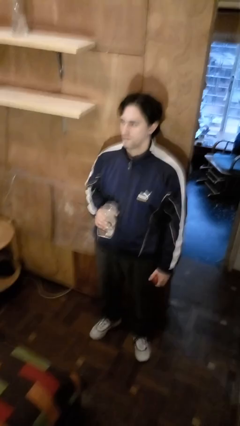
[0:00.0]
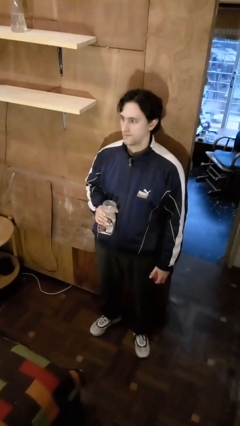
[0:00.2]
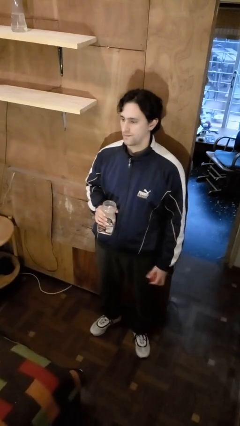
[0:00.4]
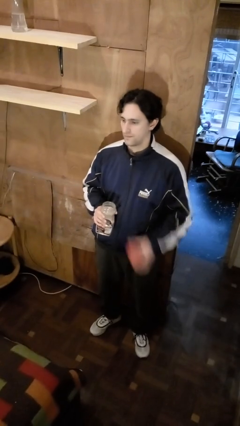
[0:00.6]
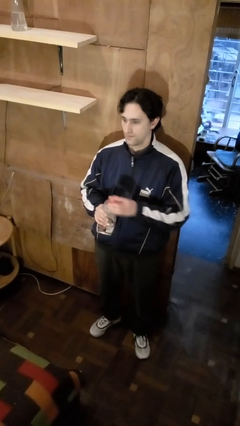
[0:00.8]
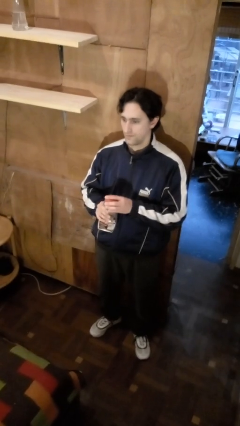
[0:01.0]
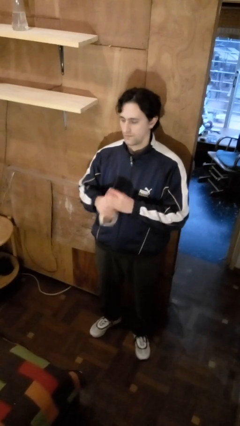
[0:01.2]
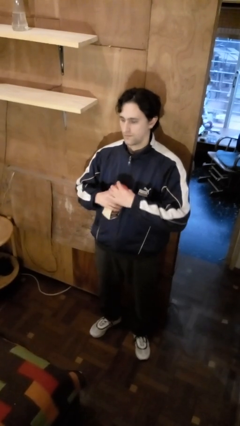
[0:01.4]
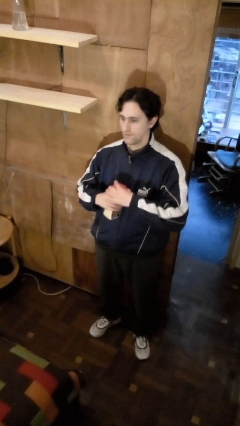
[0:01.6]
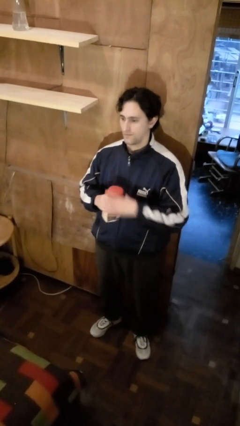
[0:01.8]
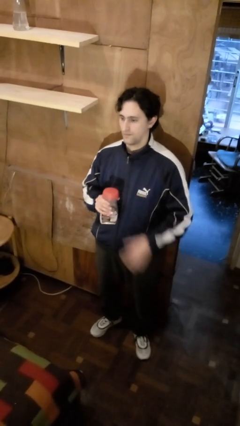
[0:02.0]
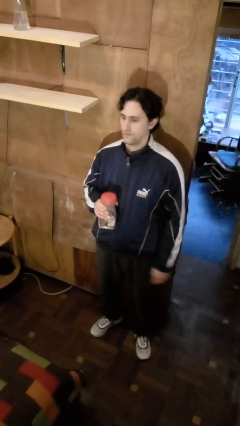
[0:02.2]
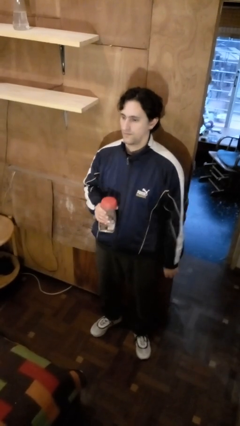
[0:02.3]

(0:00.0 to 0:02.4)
person closes jar

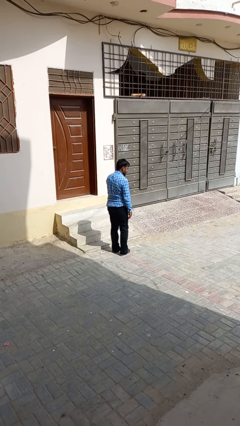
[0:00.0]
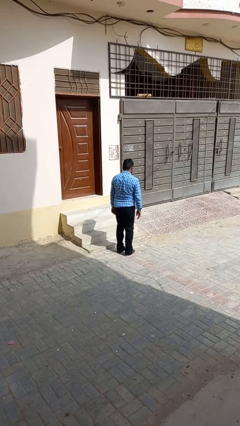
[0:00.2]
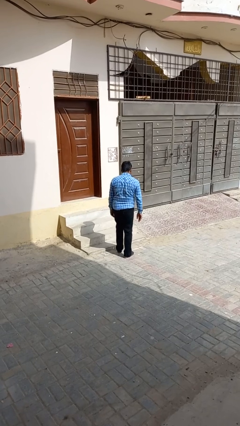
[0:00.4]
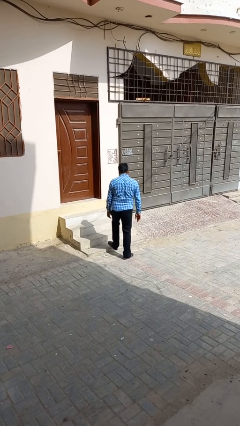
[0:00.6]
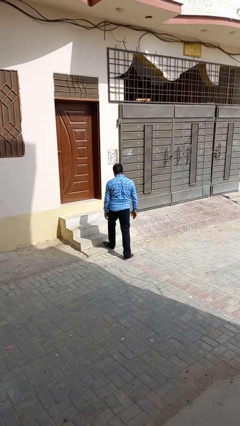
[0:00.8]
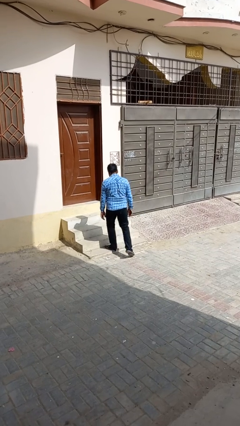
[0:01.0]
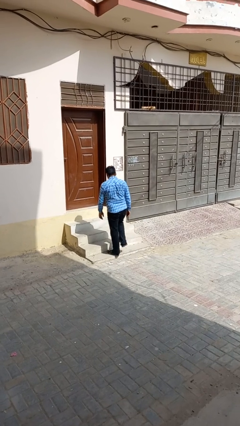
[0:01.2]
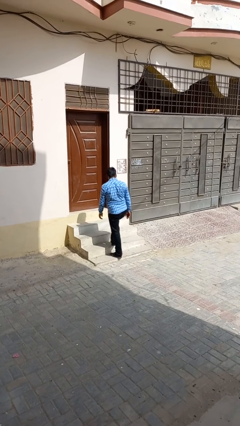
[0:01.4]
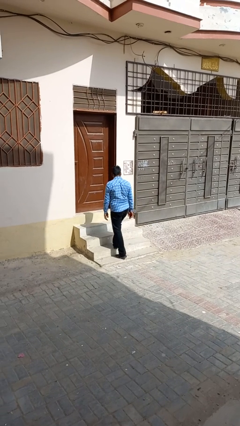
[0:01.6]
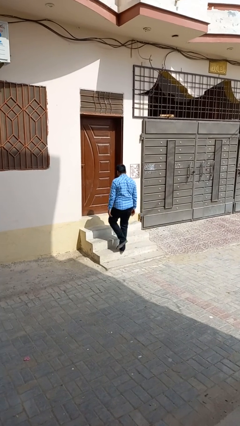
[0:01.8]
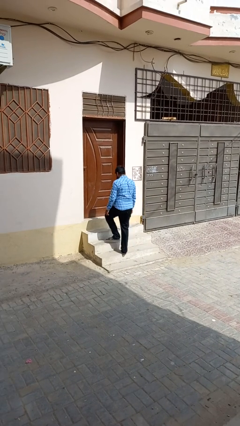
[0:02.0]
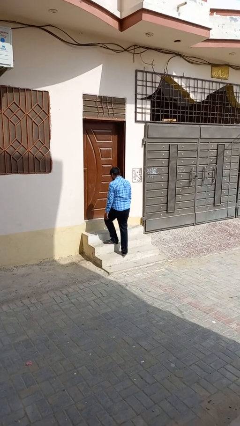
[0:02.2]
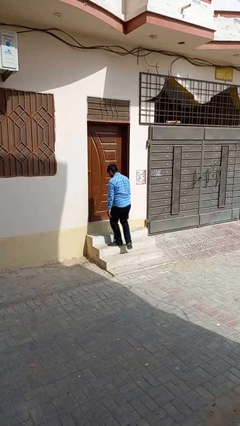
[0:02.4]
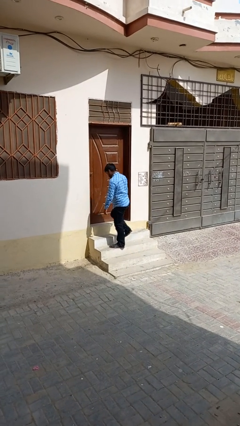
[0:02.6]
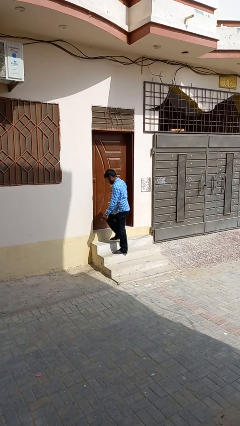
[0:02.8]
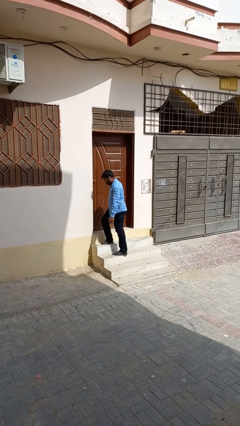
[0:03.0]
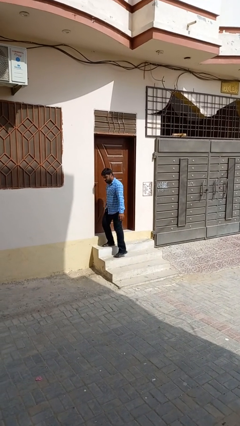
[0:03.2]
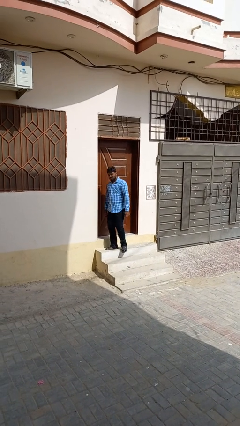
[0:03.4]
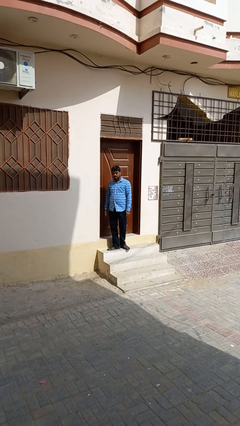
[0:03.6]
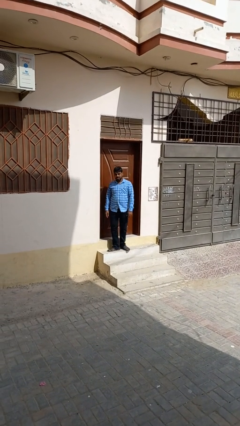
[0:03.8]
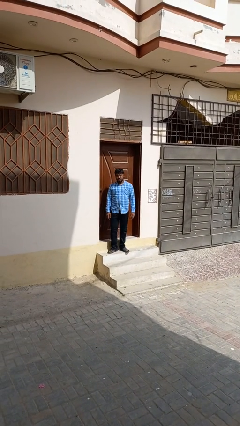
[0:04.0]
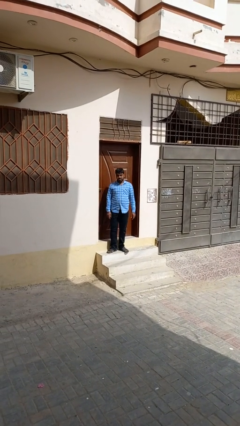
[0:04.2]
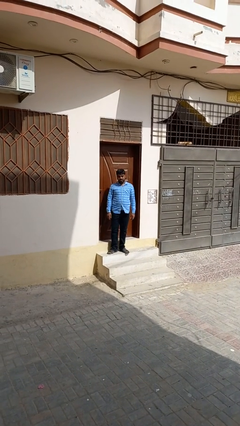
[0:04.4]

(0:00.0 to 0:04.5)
person climbs up stairs

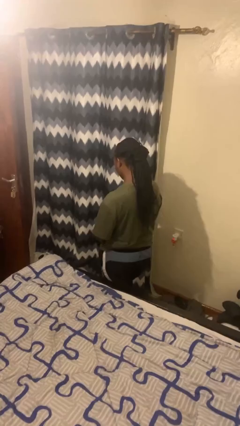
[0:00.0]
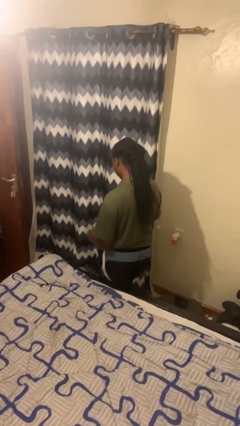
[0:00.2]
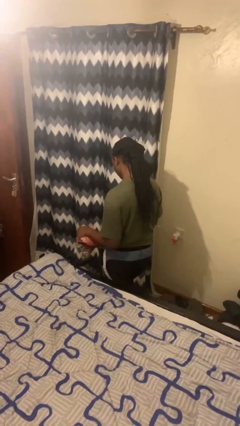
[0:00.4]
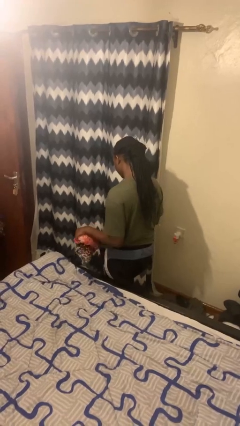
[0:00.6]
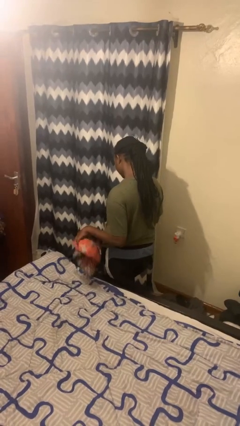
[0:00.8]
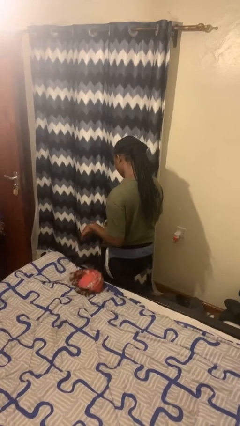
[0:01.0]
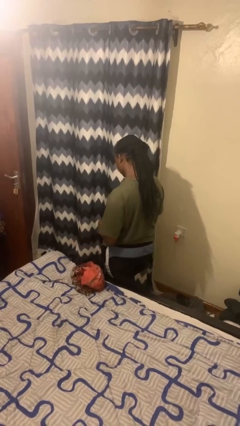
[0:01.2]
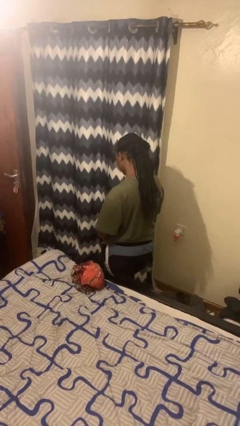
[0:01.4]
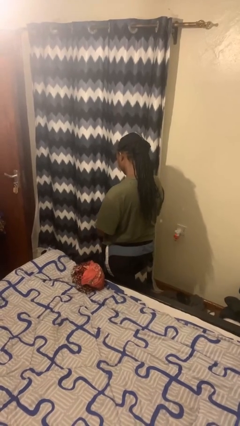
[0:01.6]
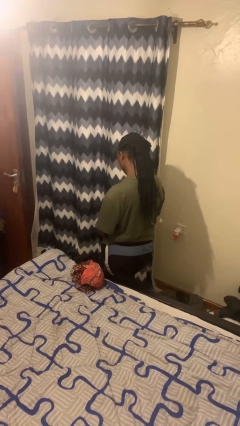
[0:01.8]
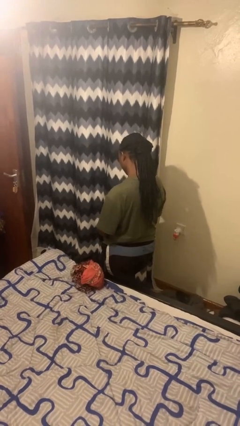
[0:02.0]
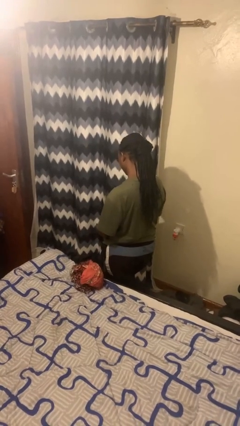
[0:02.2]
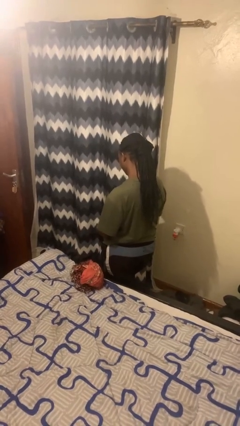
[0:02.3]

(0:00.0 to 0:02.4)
person throws object on bed

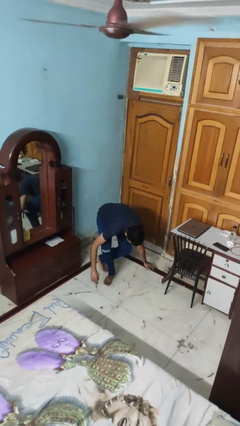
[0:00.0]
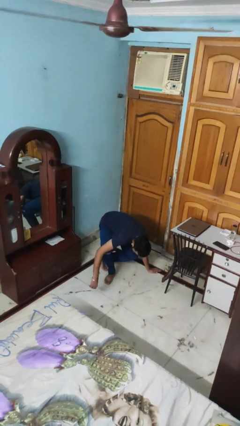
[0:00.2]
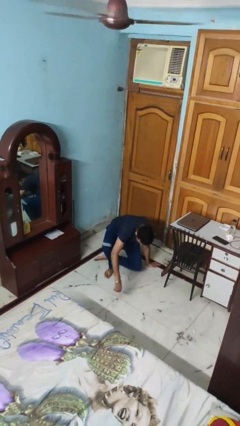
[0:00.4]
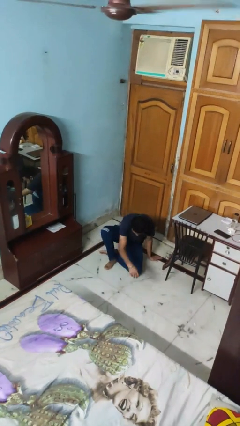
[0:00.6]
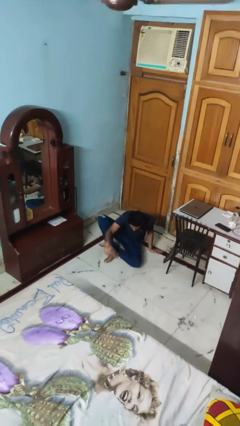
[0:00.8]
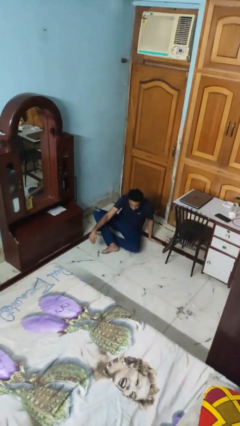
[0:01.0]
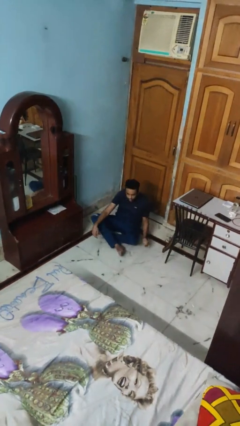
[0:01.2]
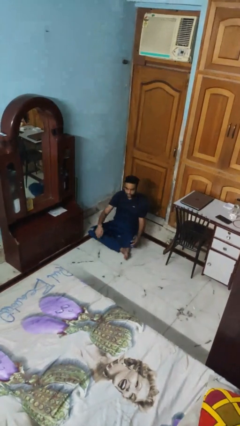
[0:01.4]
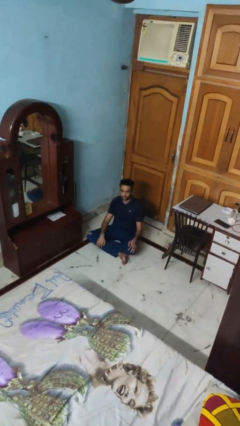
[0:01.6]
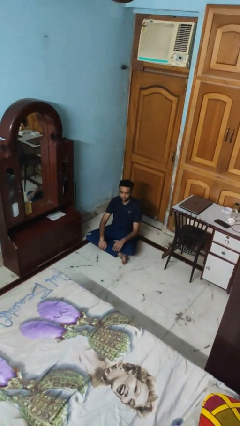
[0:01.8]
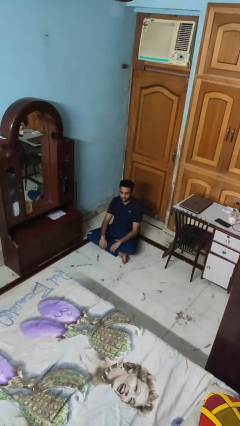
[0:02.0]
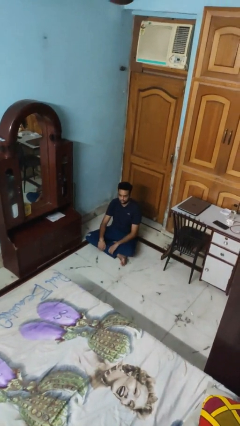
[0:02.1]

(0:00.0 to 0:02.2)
person sits crisscross

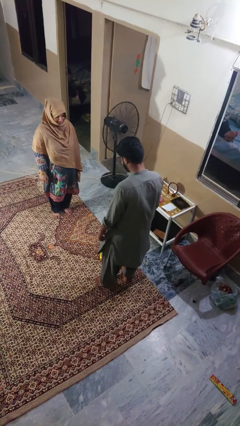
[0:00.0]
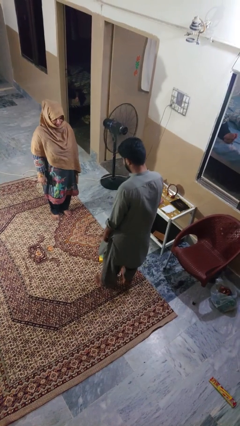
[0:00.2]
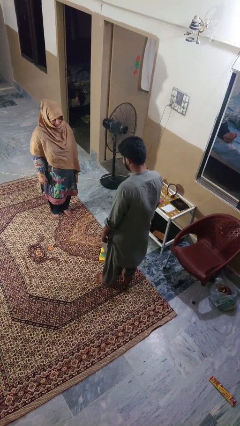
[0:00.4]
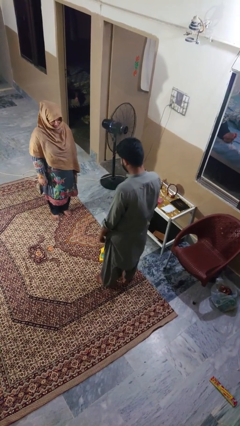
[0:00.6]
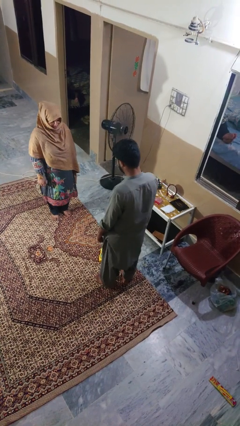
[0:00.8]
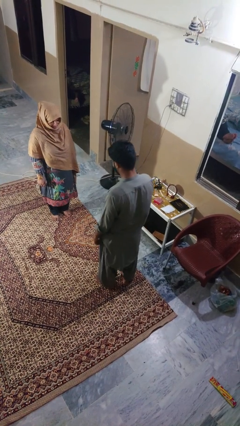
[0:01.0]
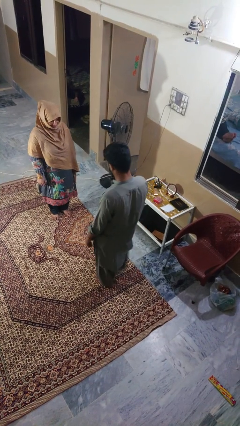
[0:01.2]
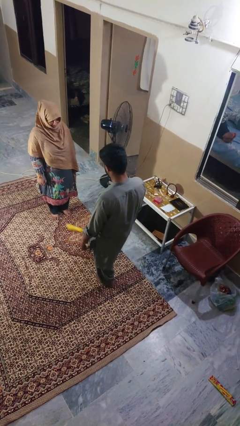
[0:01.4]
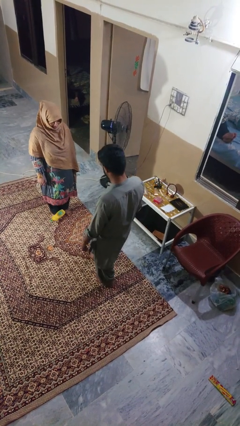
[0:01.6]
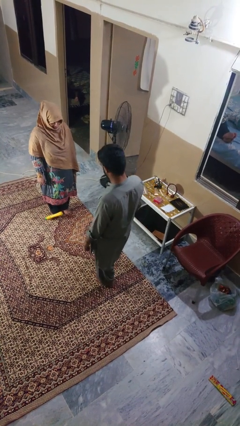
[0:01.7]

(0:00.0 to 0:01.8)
person kicks object to person

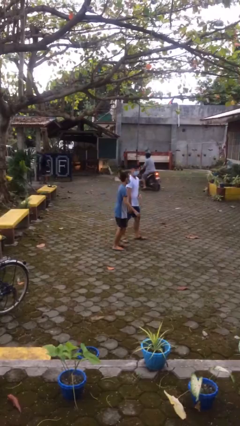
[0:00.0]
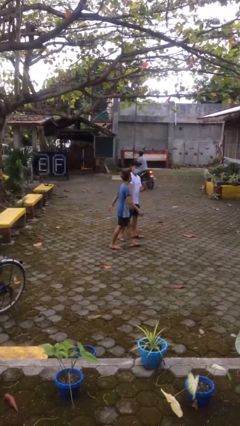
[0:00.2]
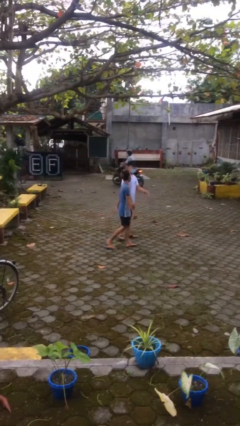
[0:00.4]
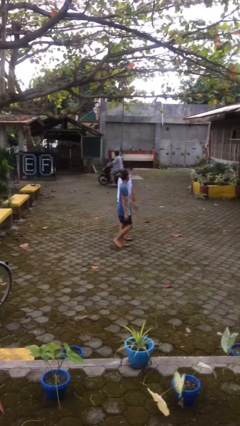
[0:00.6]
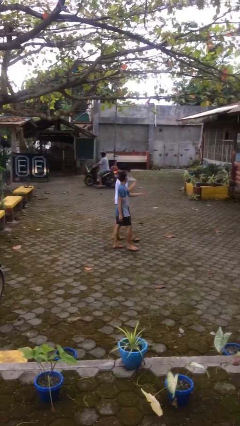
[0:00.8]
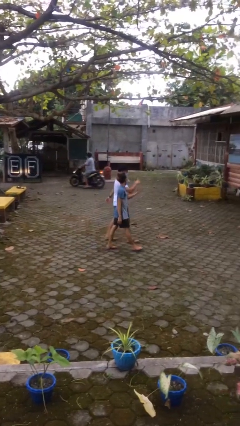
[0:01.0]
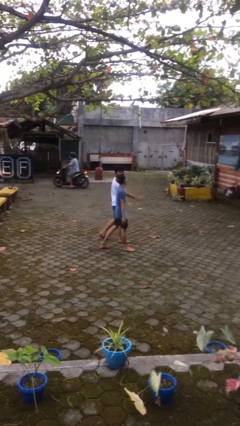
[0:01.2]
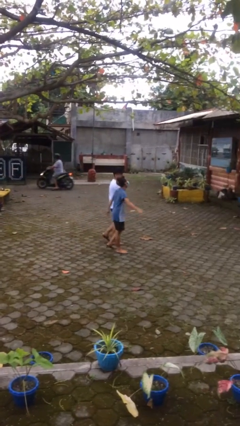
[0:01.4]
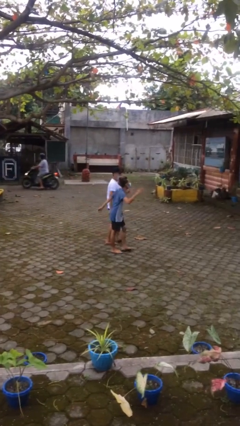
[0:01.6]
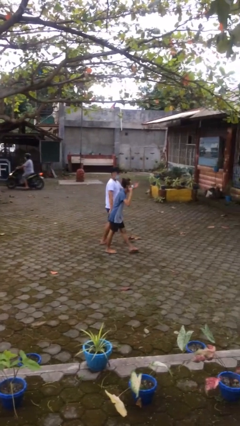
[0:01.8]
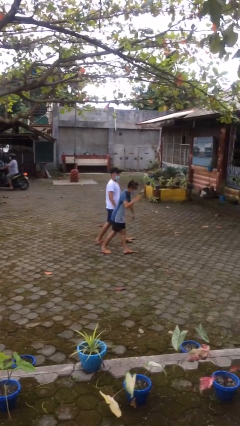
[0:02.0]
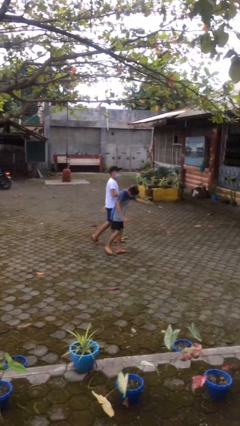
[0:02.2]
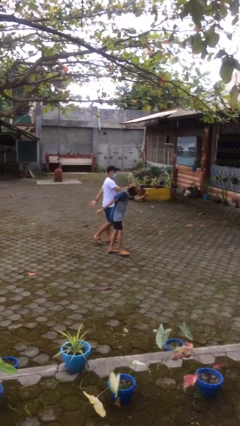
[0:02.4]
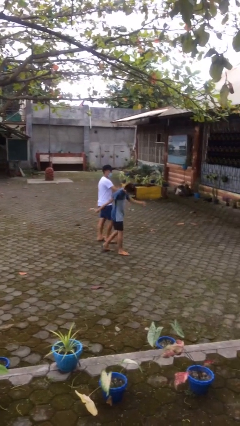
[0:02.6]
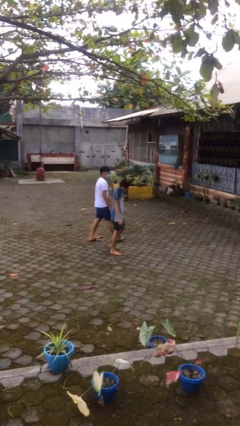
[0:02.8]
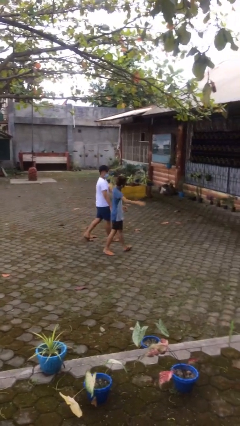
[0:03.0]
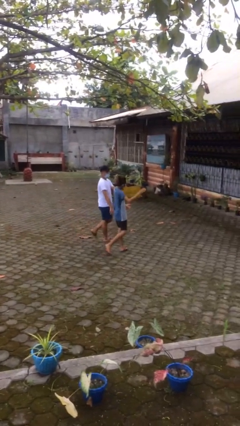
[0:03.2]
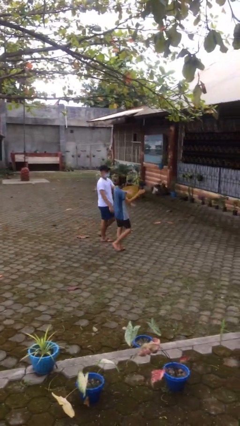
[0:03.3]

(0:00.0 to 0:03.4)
person talks to person

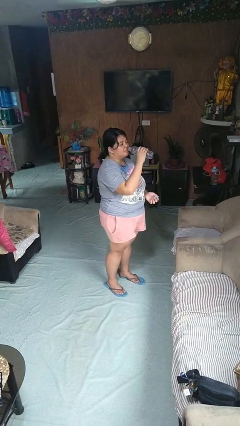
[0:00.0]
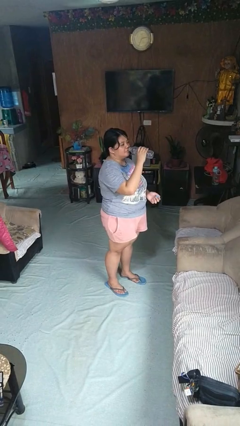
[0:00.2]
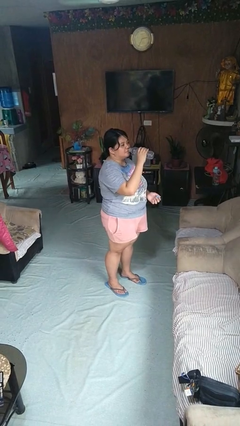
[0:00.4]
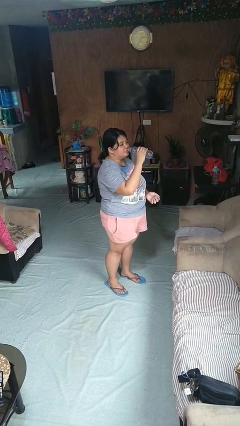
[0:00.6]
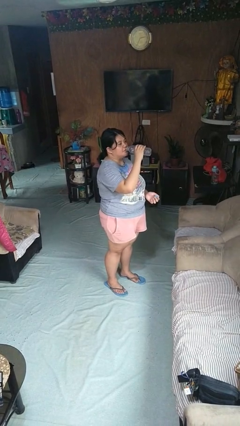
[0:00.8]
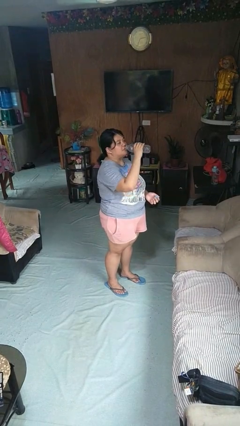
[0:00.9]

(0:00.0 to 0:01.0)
person drinks from bottle
